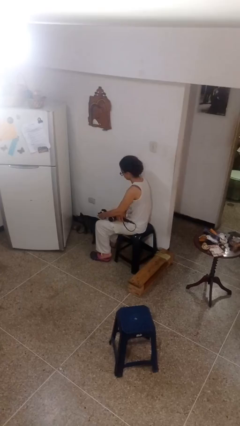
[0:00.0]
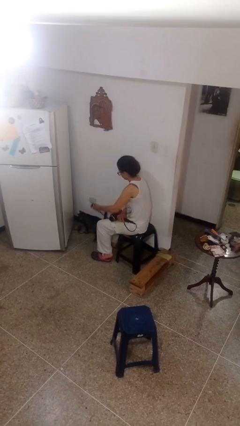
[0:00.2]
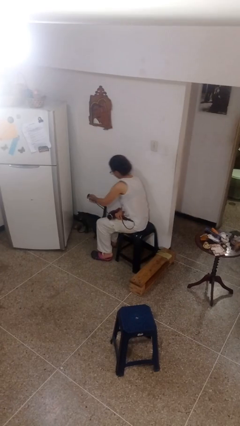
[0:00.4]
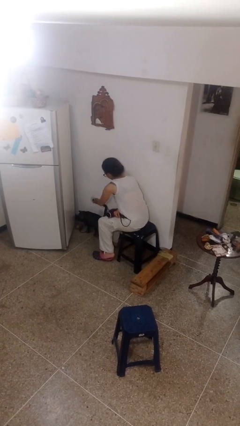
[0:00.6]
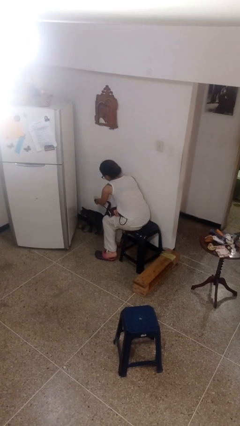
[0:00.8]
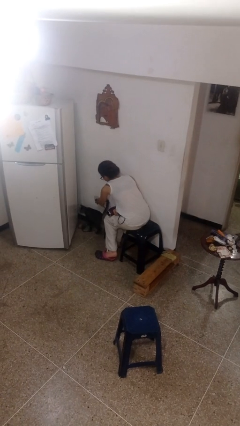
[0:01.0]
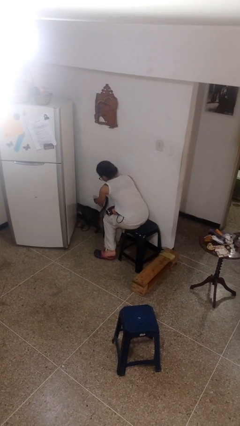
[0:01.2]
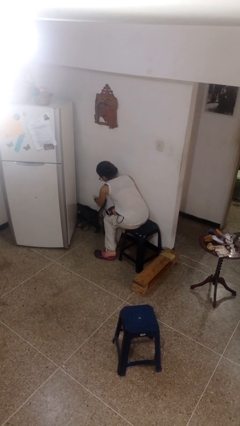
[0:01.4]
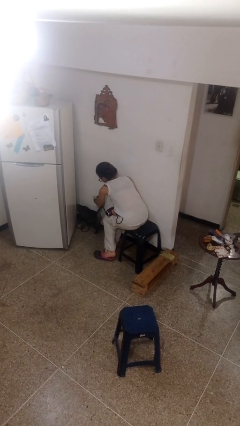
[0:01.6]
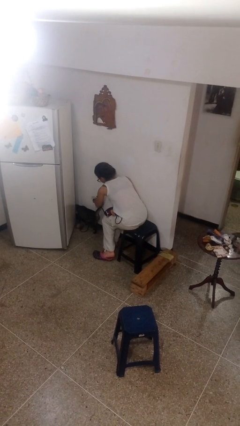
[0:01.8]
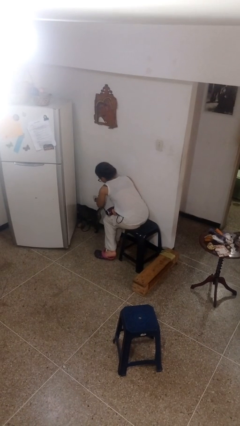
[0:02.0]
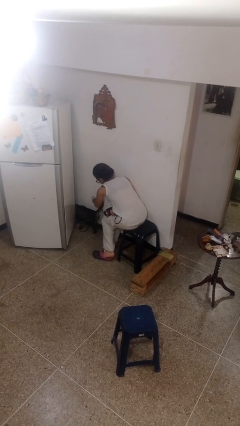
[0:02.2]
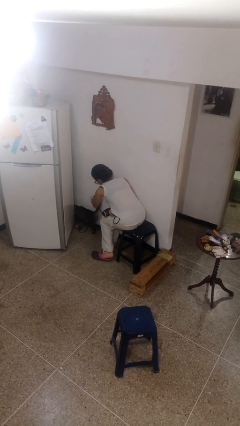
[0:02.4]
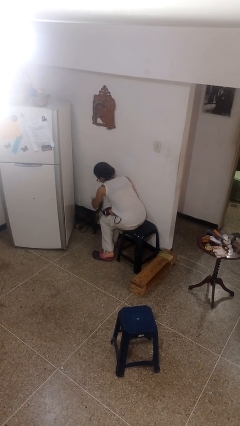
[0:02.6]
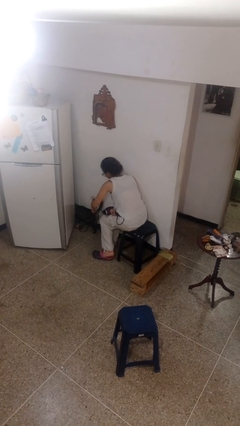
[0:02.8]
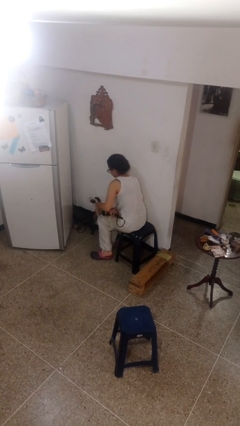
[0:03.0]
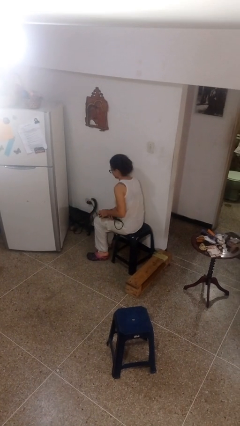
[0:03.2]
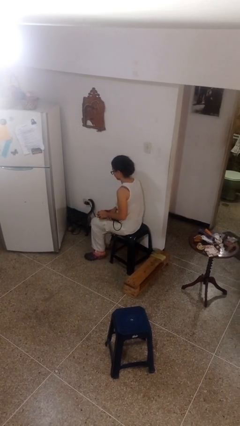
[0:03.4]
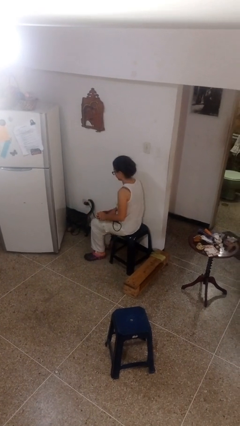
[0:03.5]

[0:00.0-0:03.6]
person plugs into electrical socket

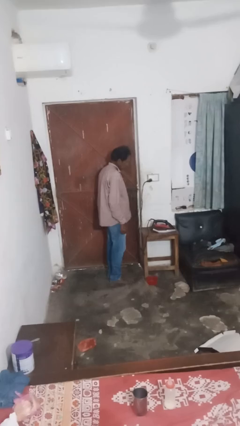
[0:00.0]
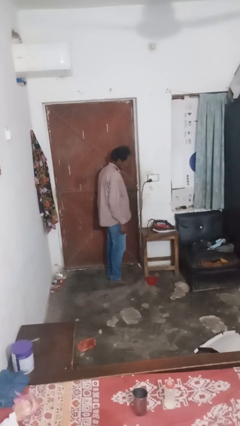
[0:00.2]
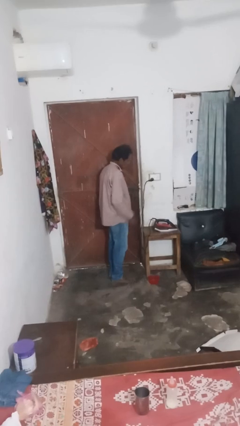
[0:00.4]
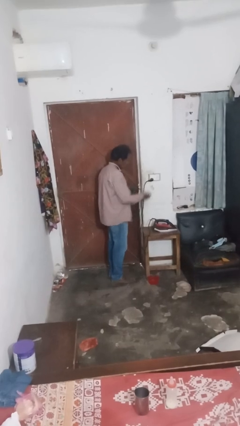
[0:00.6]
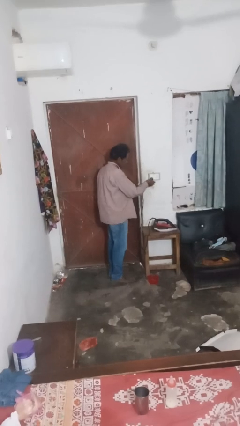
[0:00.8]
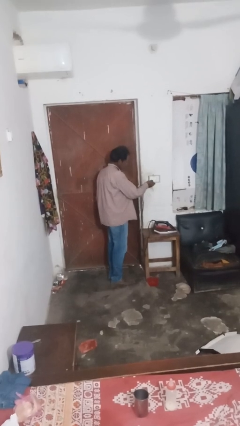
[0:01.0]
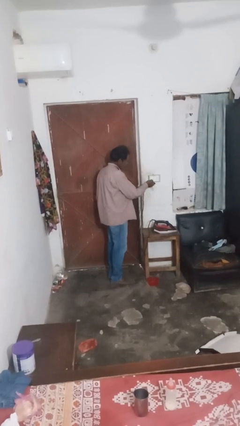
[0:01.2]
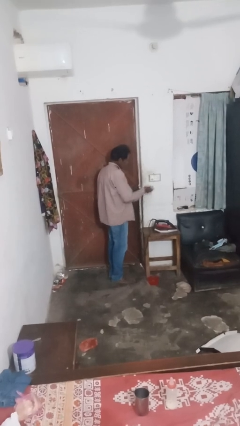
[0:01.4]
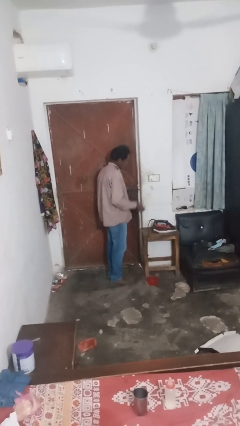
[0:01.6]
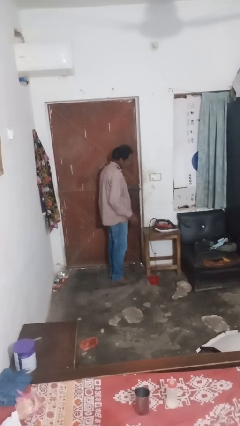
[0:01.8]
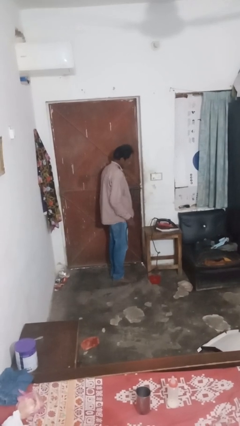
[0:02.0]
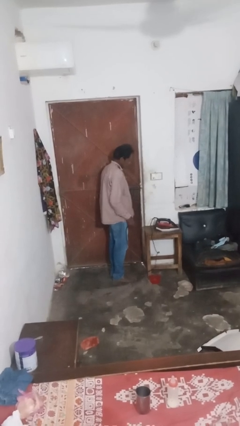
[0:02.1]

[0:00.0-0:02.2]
person unplugs from electrical socket

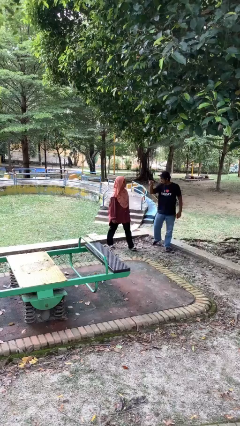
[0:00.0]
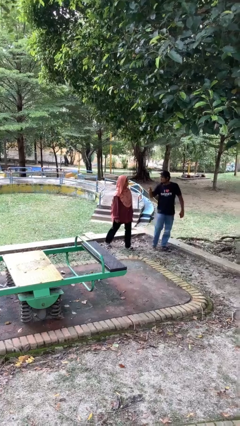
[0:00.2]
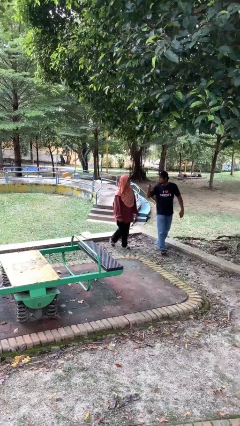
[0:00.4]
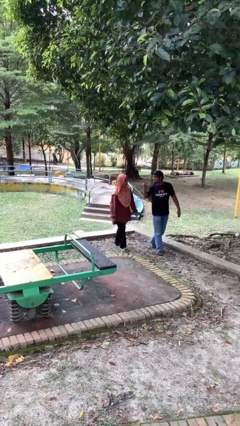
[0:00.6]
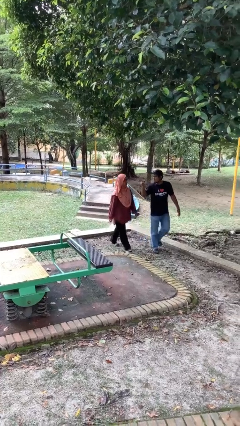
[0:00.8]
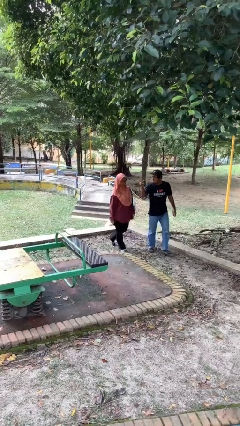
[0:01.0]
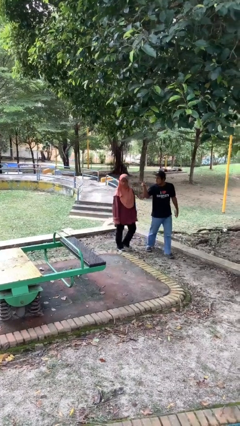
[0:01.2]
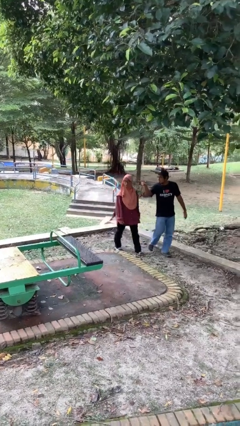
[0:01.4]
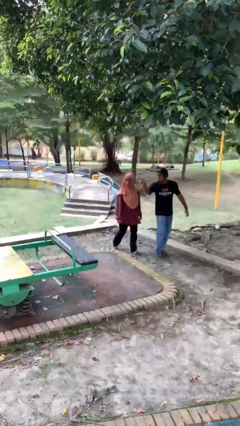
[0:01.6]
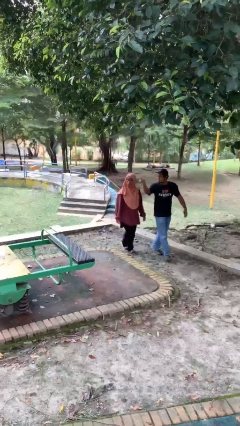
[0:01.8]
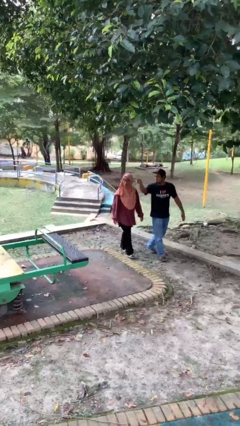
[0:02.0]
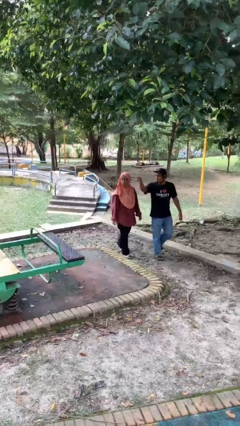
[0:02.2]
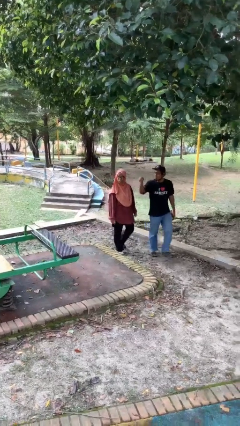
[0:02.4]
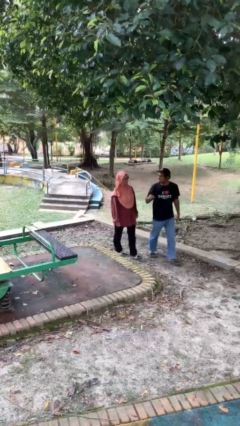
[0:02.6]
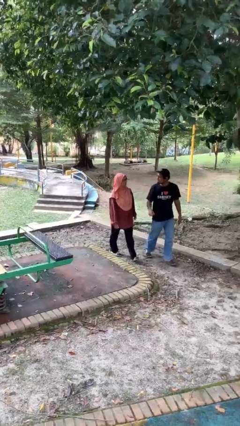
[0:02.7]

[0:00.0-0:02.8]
person talks to person

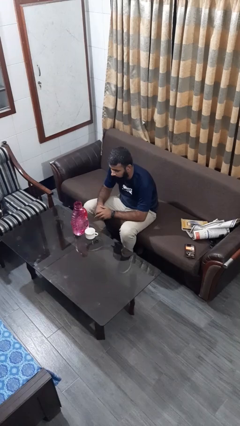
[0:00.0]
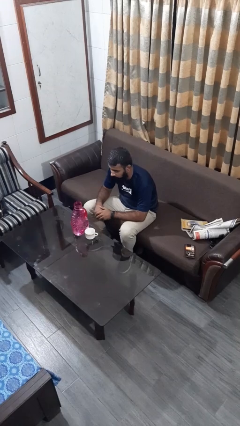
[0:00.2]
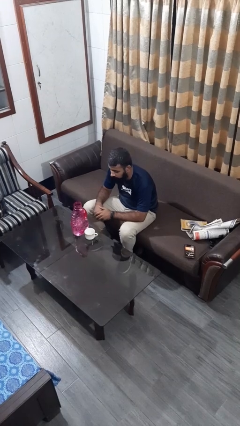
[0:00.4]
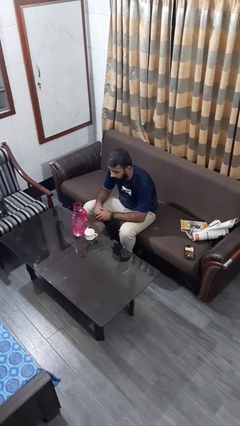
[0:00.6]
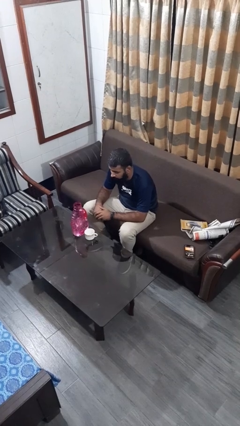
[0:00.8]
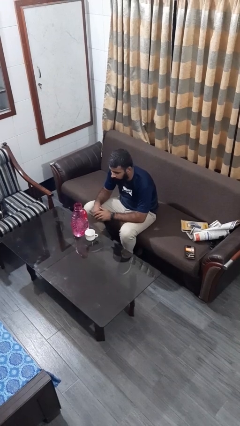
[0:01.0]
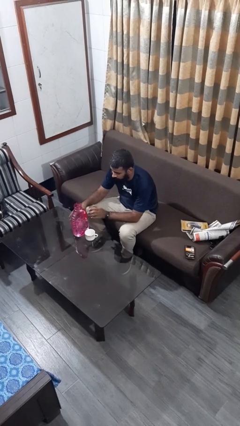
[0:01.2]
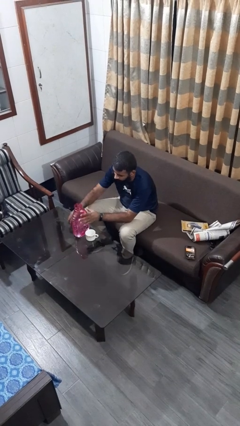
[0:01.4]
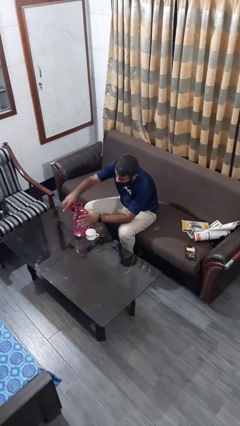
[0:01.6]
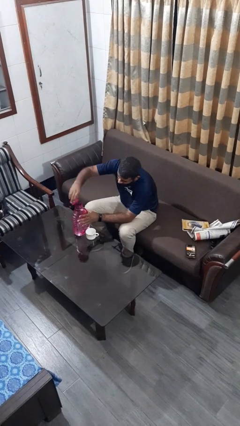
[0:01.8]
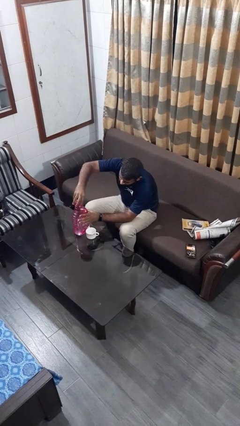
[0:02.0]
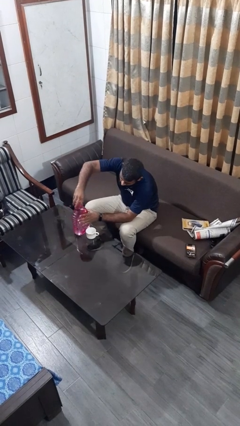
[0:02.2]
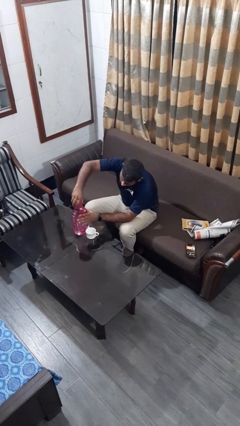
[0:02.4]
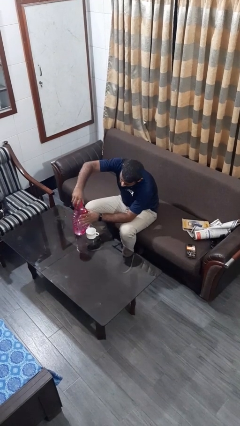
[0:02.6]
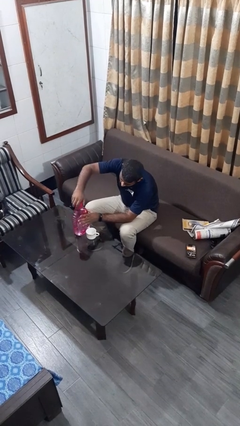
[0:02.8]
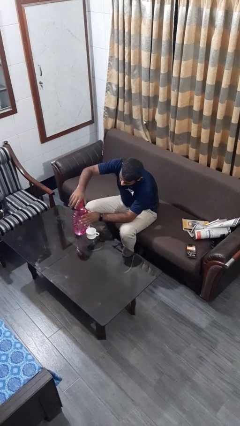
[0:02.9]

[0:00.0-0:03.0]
person screws lid to bottle

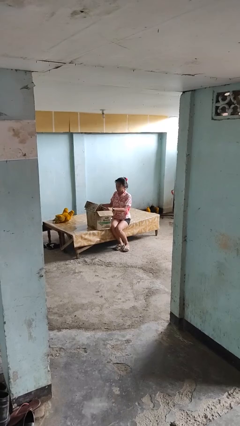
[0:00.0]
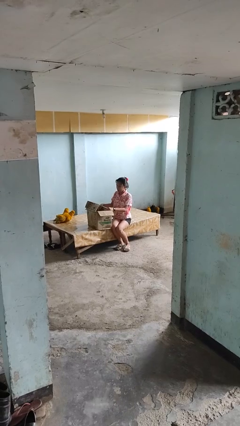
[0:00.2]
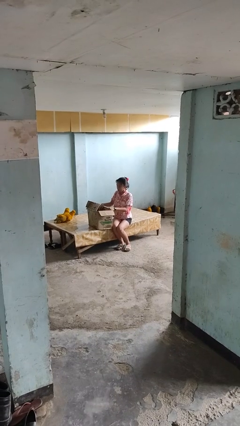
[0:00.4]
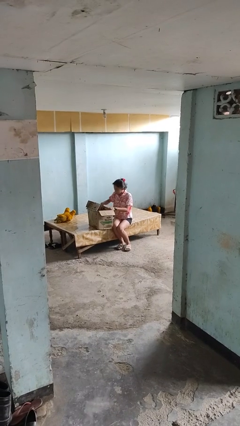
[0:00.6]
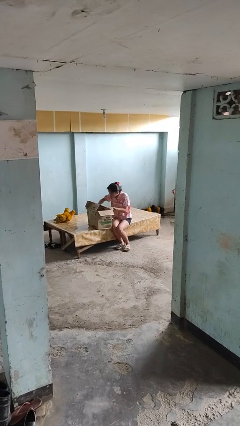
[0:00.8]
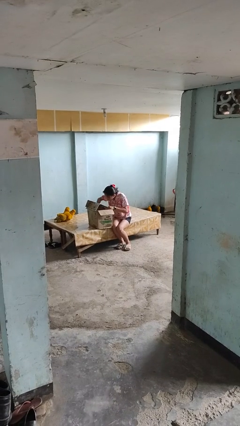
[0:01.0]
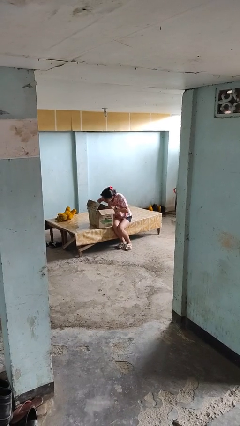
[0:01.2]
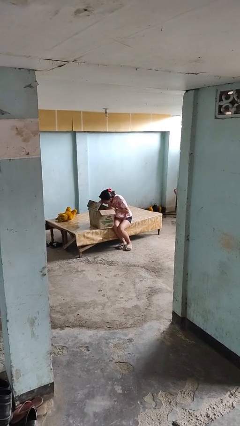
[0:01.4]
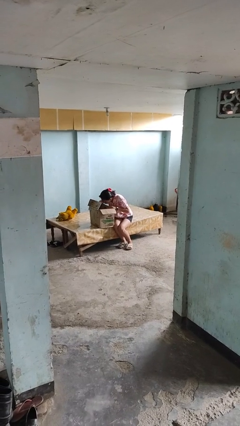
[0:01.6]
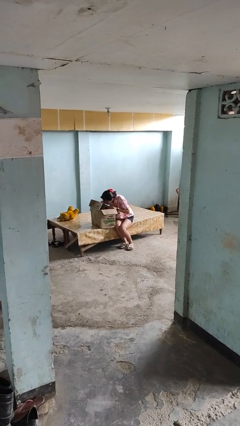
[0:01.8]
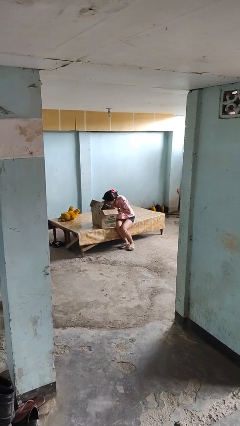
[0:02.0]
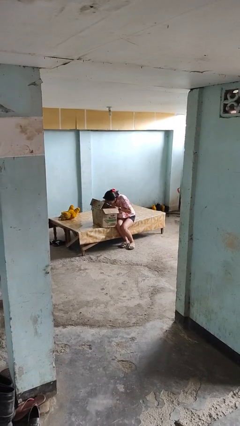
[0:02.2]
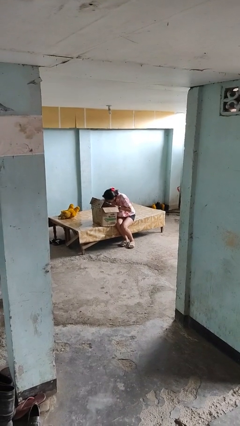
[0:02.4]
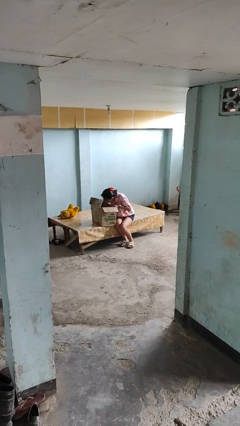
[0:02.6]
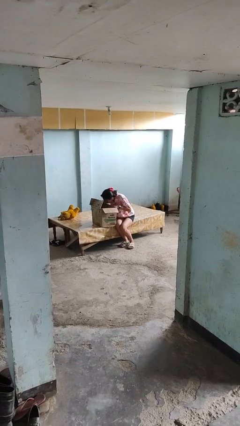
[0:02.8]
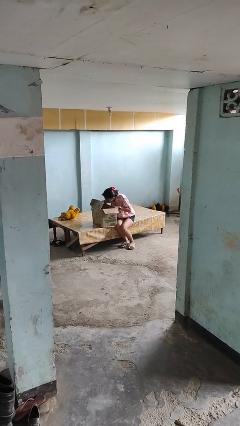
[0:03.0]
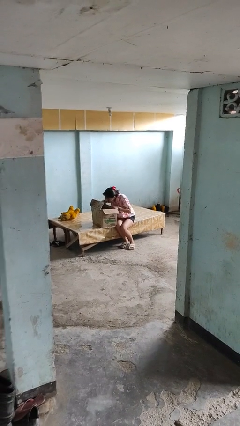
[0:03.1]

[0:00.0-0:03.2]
person searches in box

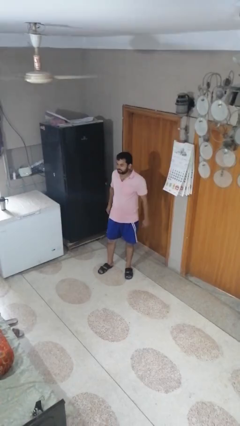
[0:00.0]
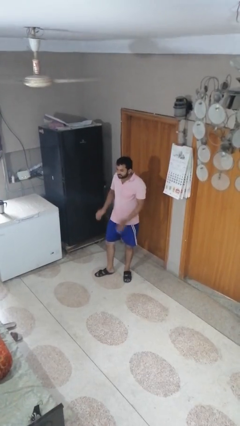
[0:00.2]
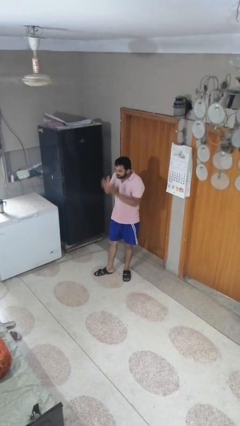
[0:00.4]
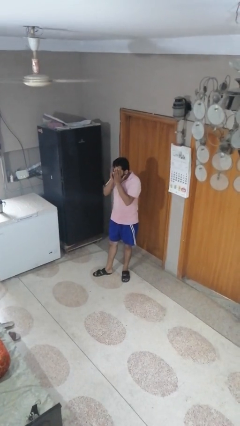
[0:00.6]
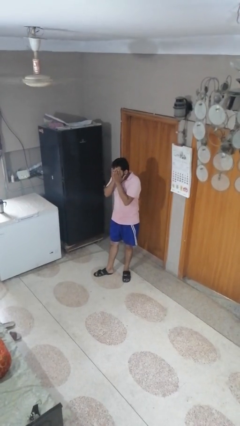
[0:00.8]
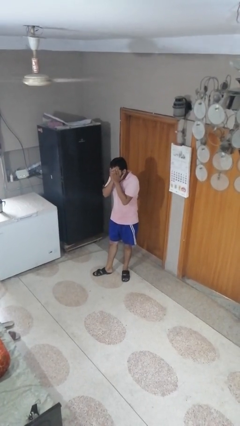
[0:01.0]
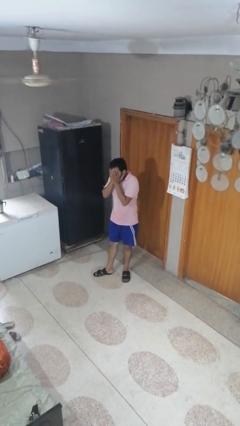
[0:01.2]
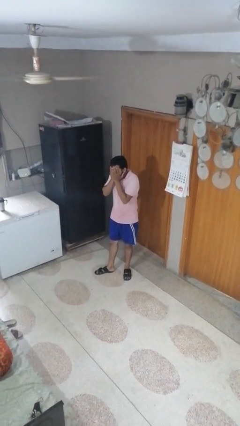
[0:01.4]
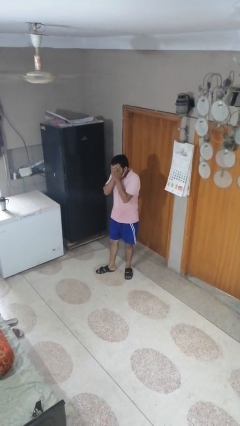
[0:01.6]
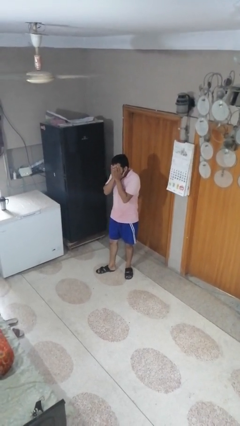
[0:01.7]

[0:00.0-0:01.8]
person covers face with hands

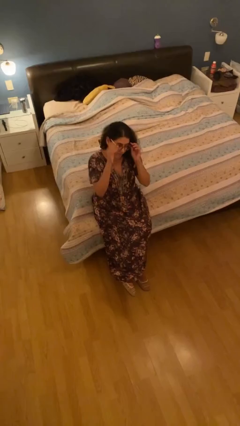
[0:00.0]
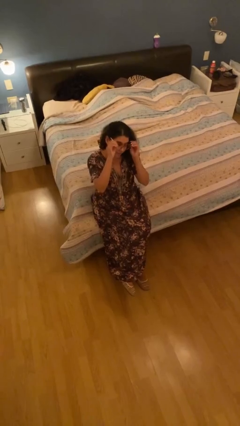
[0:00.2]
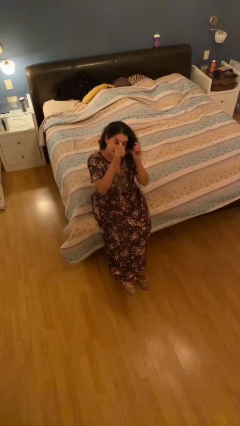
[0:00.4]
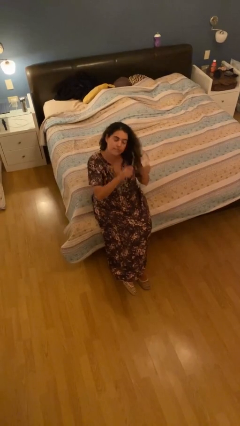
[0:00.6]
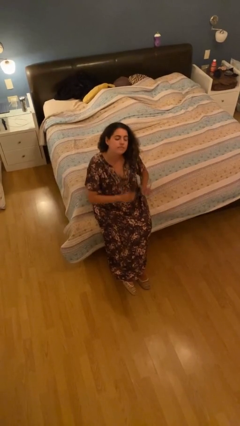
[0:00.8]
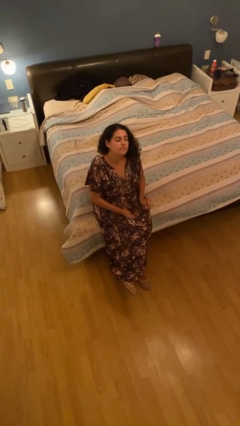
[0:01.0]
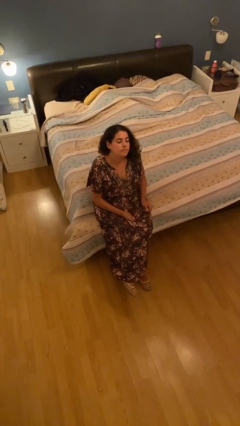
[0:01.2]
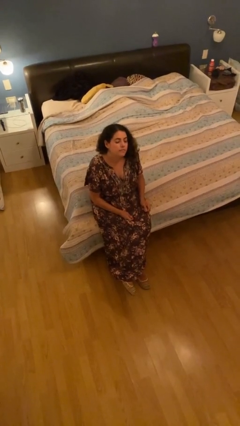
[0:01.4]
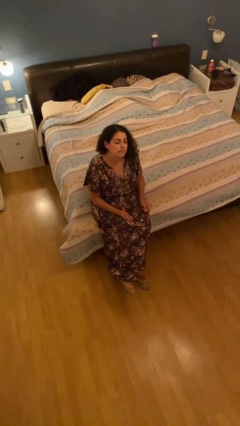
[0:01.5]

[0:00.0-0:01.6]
person takes off glasses
